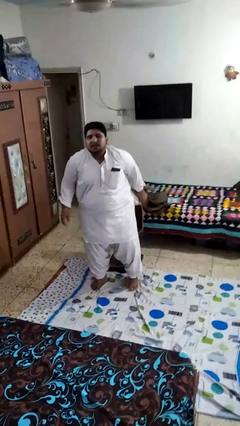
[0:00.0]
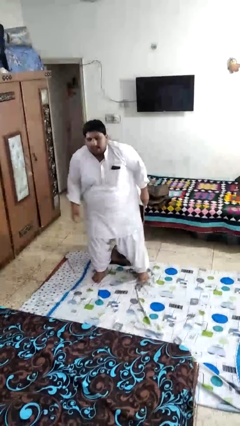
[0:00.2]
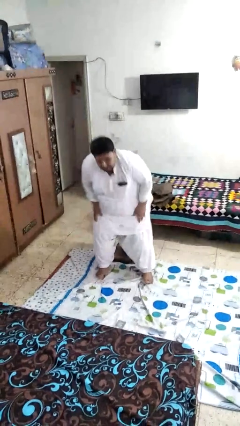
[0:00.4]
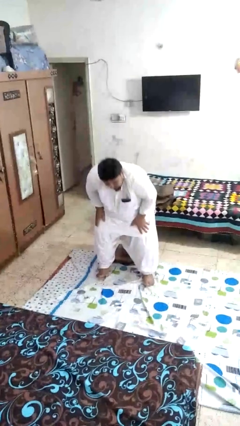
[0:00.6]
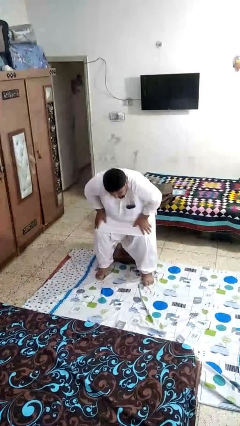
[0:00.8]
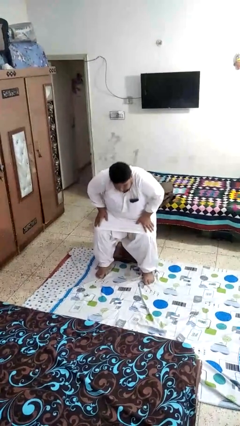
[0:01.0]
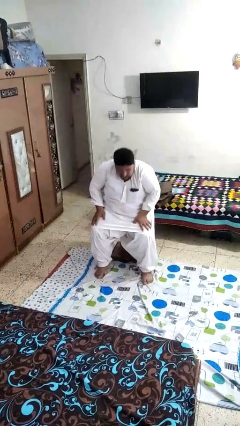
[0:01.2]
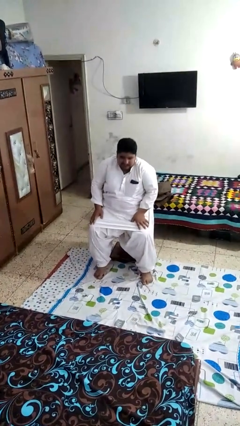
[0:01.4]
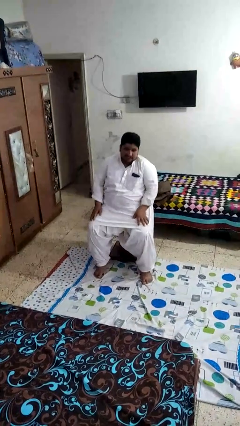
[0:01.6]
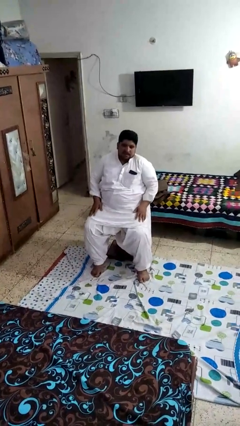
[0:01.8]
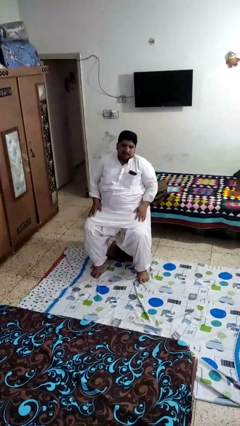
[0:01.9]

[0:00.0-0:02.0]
person sits down

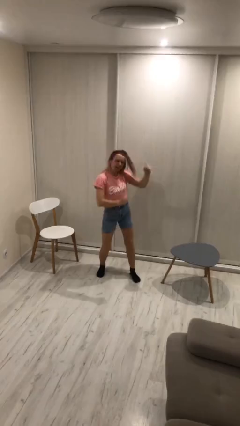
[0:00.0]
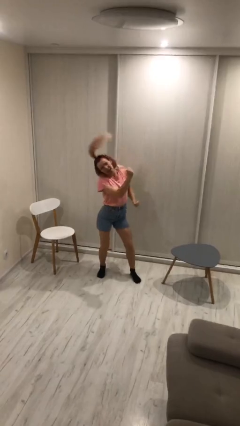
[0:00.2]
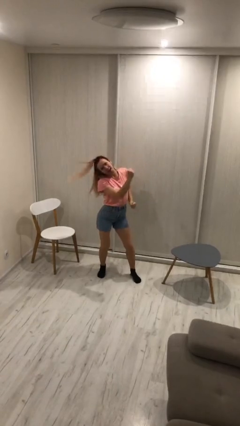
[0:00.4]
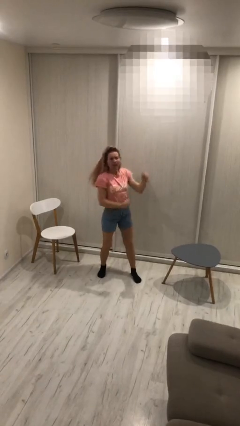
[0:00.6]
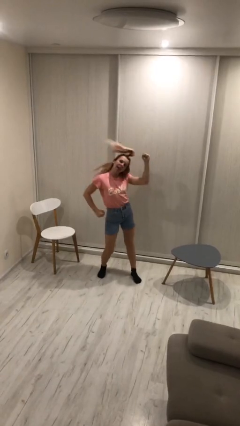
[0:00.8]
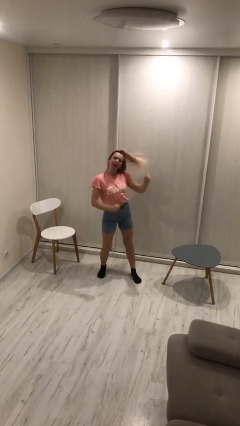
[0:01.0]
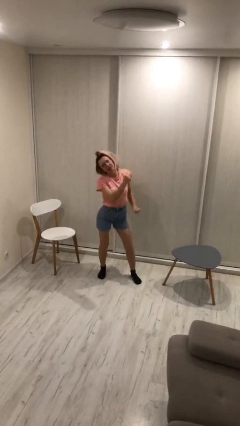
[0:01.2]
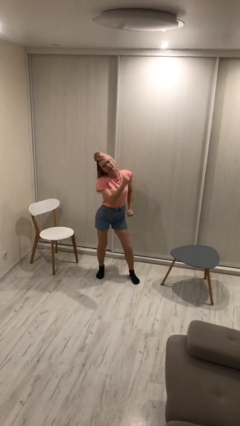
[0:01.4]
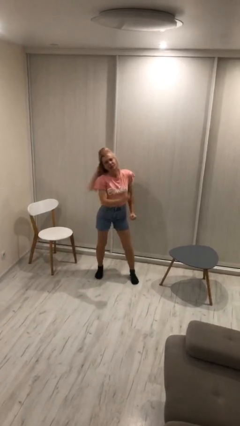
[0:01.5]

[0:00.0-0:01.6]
person dances in place

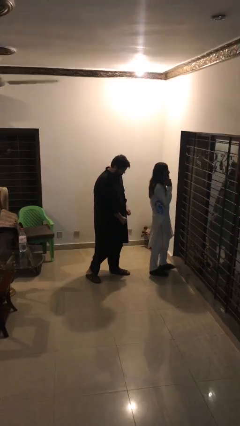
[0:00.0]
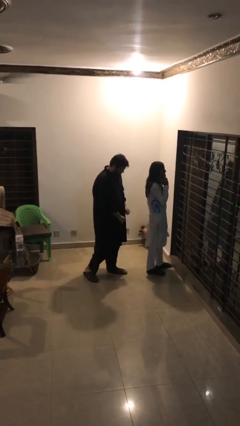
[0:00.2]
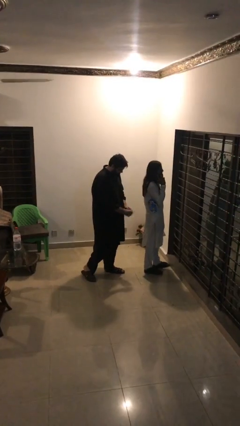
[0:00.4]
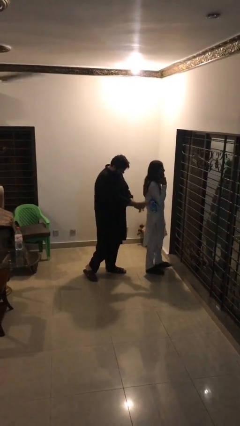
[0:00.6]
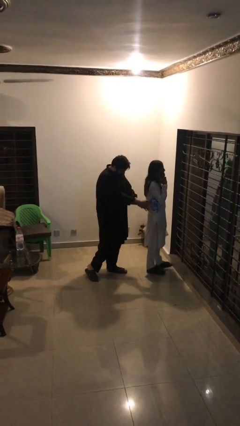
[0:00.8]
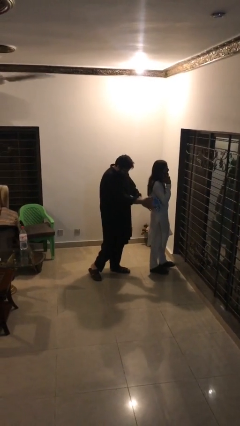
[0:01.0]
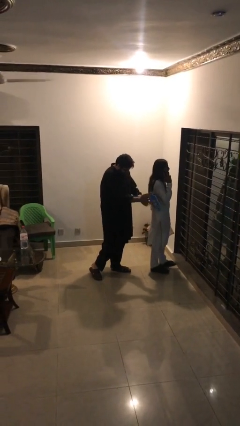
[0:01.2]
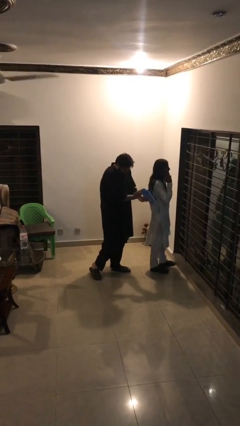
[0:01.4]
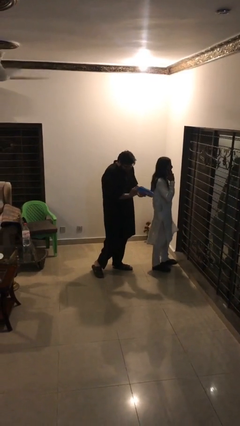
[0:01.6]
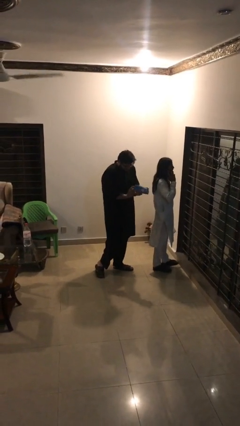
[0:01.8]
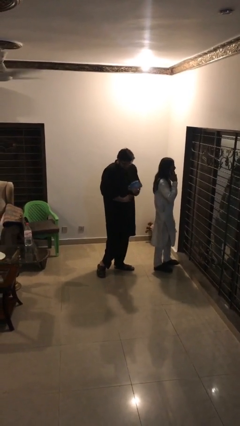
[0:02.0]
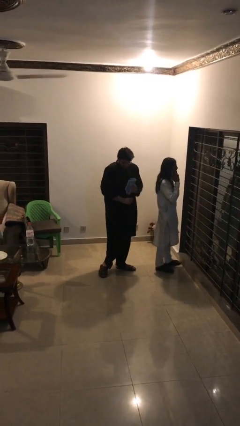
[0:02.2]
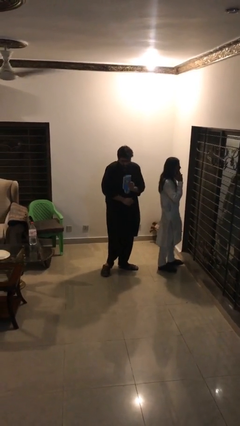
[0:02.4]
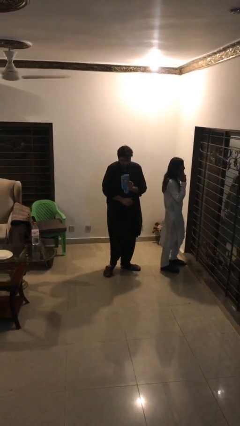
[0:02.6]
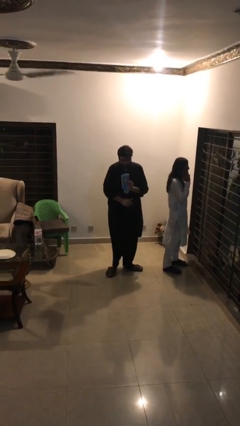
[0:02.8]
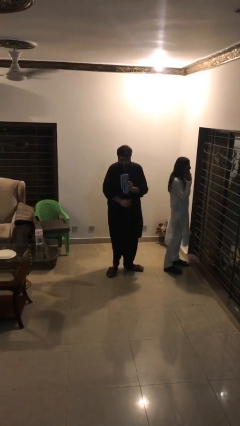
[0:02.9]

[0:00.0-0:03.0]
person steals object from person

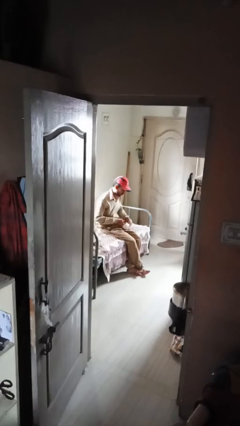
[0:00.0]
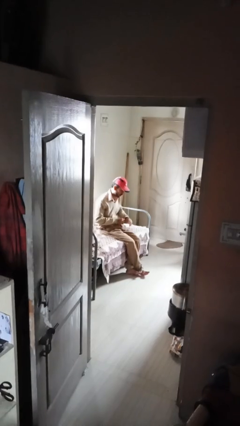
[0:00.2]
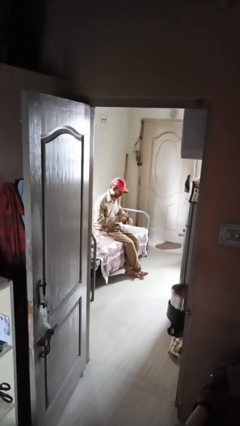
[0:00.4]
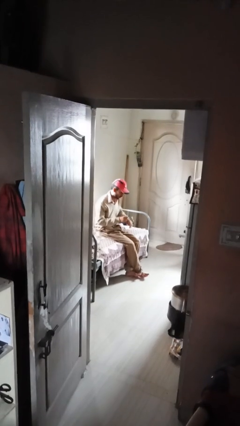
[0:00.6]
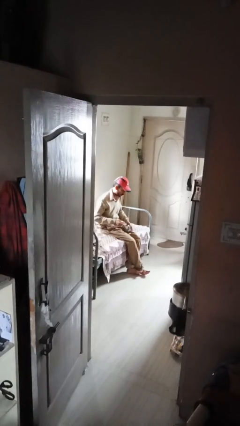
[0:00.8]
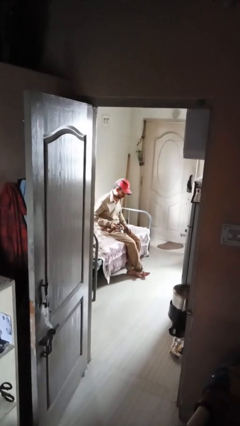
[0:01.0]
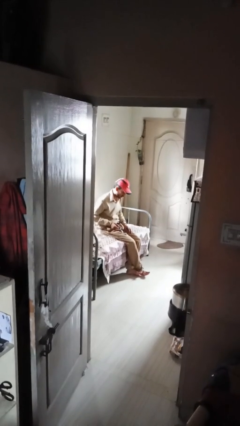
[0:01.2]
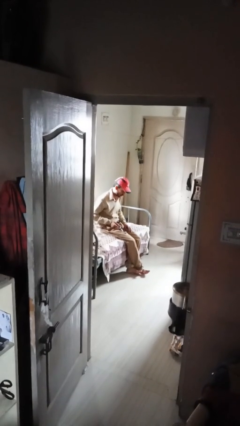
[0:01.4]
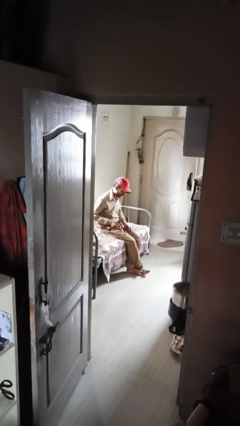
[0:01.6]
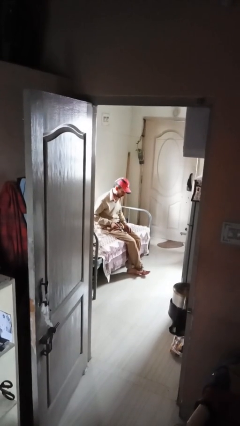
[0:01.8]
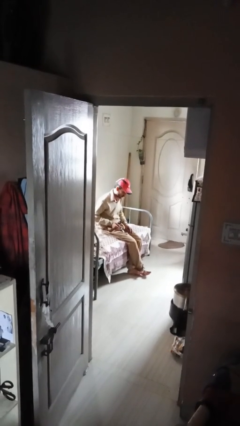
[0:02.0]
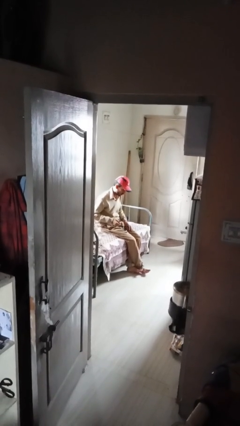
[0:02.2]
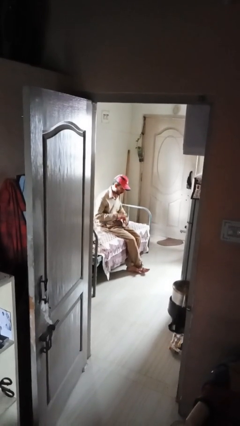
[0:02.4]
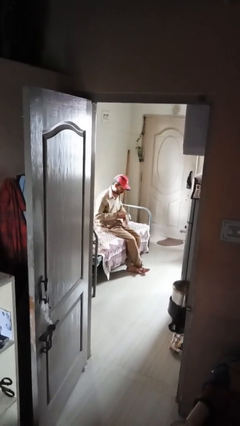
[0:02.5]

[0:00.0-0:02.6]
person takes off wristwatch

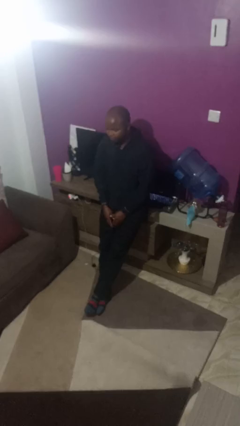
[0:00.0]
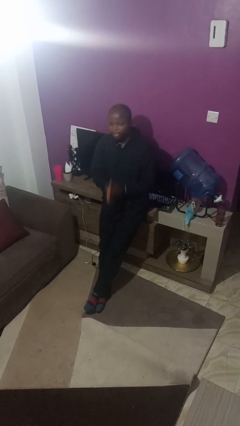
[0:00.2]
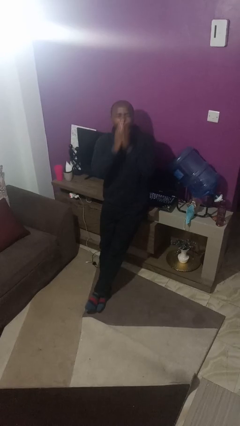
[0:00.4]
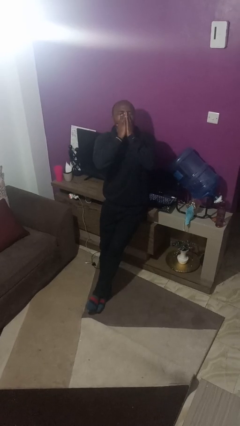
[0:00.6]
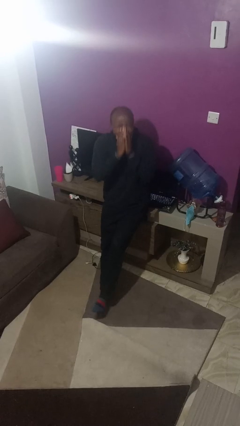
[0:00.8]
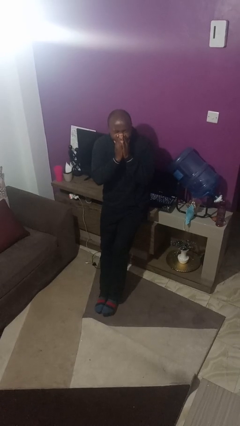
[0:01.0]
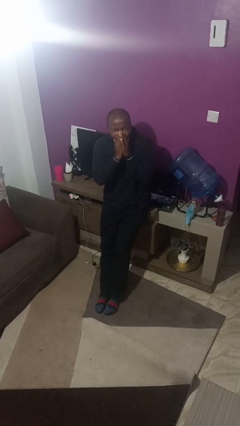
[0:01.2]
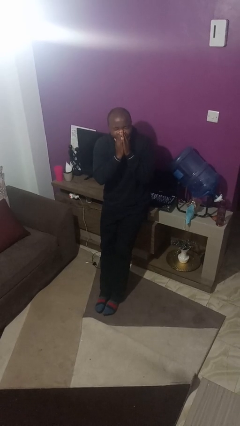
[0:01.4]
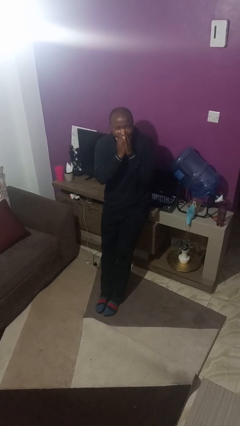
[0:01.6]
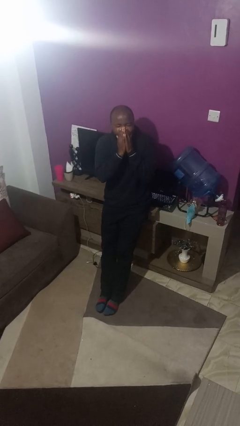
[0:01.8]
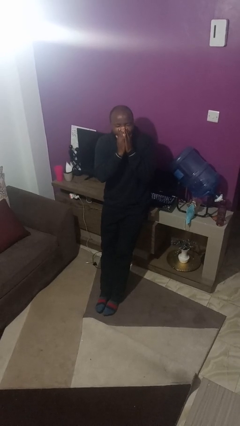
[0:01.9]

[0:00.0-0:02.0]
person sneezes into hand

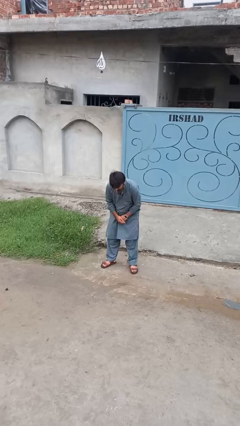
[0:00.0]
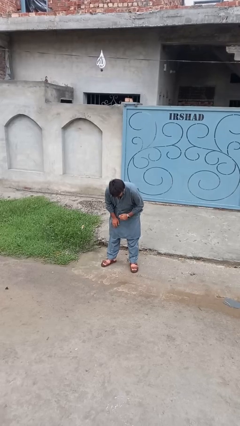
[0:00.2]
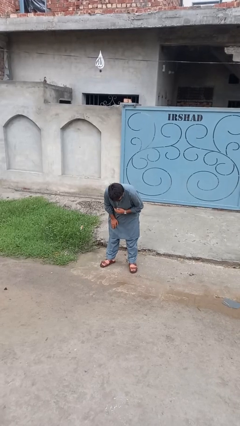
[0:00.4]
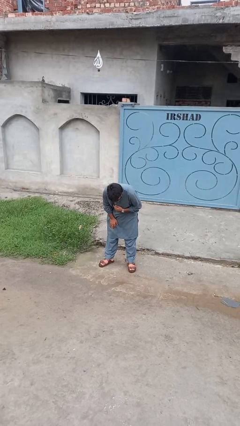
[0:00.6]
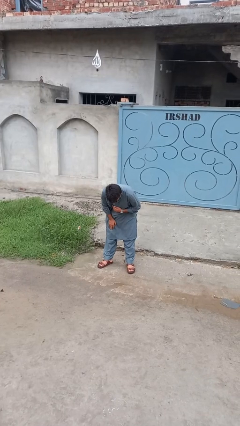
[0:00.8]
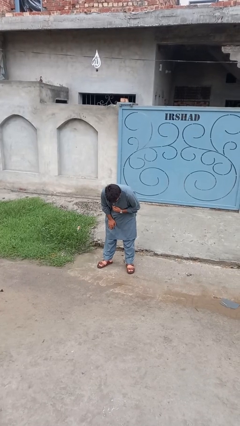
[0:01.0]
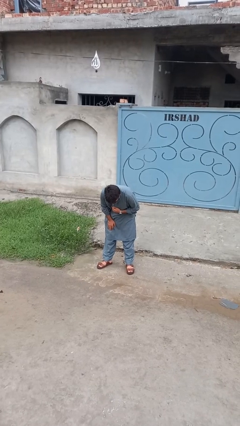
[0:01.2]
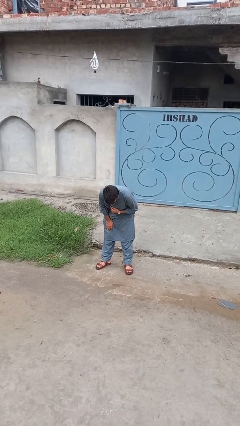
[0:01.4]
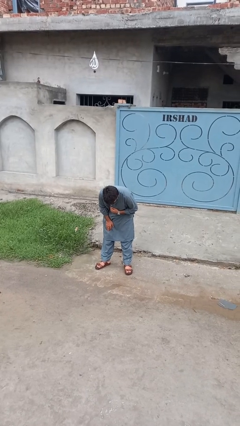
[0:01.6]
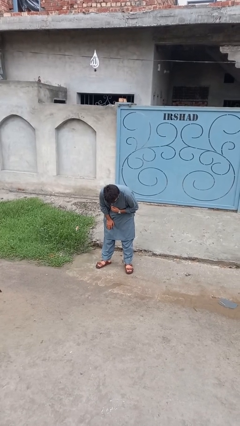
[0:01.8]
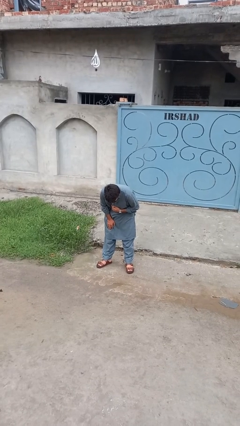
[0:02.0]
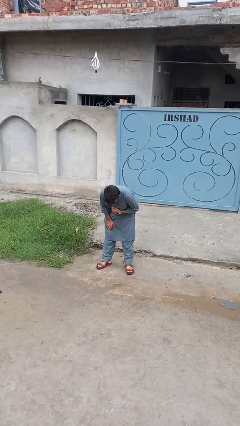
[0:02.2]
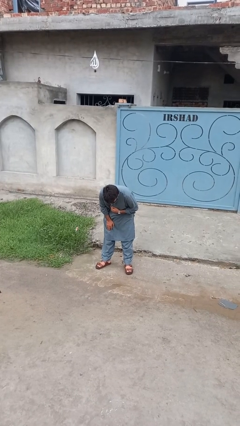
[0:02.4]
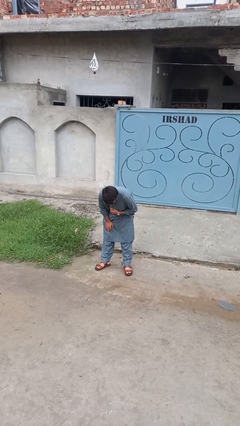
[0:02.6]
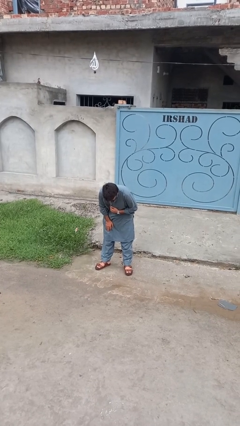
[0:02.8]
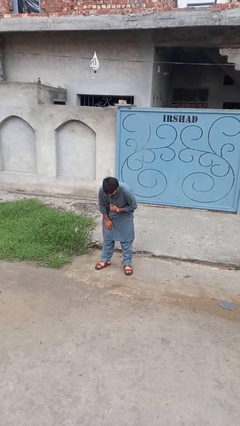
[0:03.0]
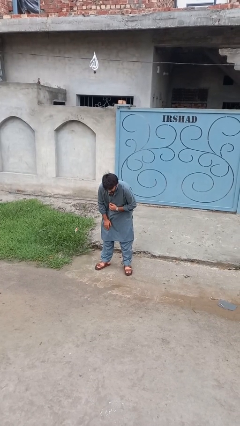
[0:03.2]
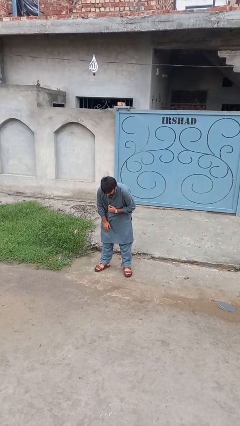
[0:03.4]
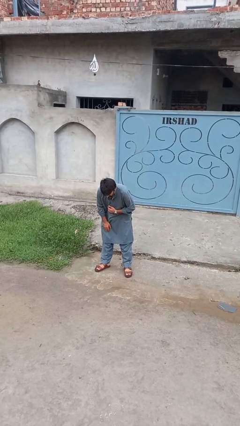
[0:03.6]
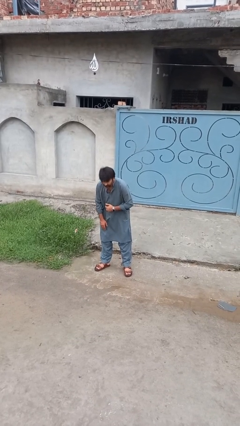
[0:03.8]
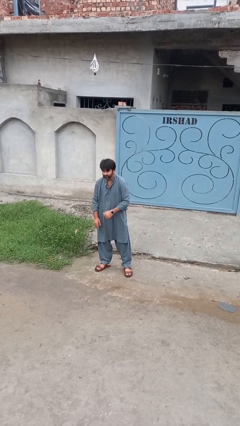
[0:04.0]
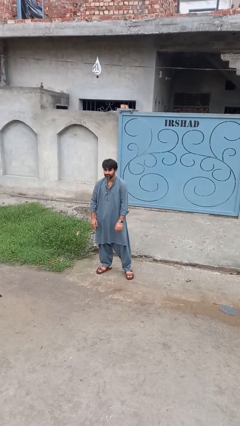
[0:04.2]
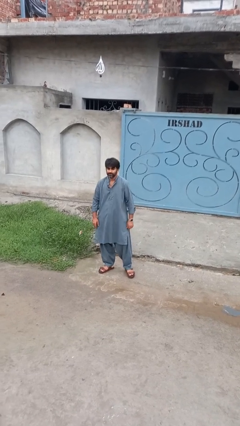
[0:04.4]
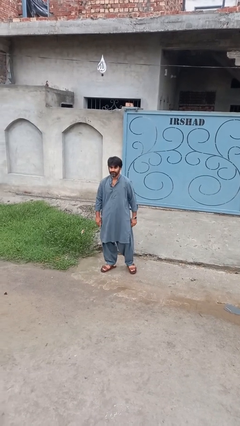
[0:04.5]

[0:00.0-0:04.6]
person bows

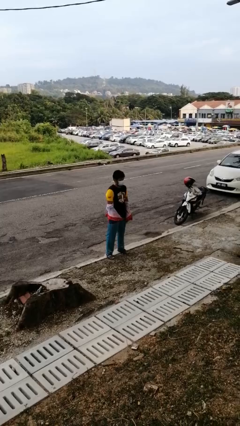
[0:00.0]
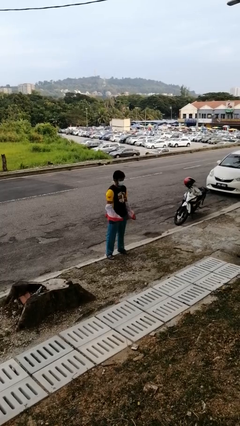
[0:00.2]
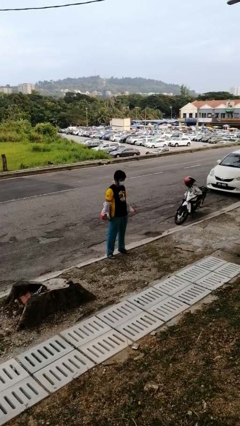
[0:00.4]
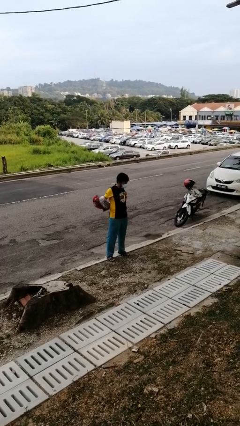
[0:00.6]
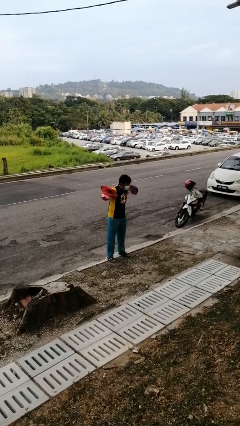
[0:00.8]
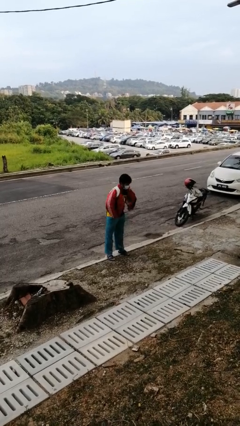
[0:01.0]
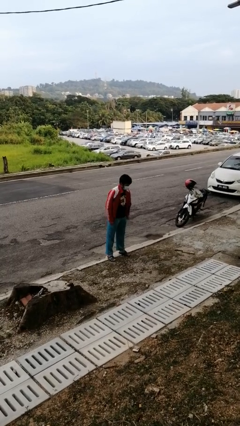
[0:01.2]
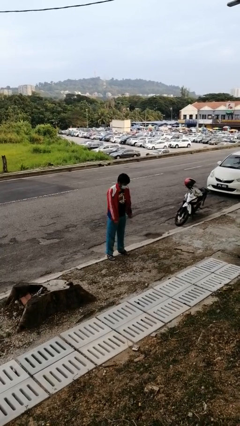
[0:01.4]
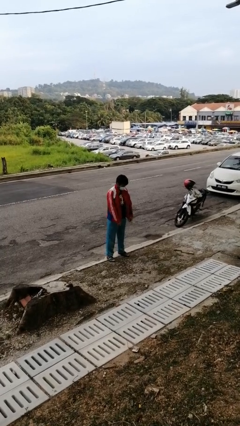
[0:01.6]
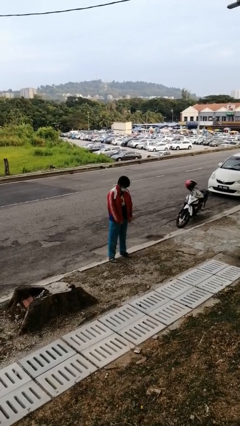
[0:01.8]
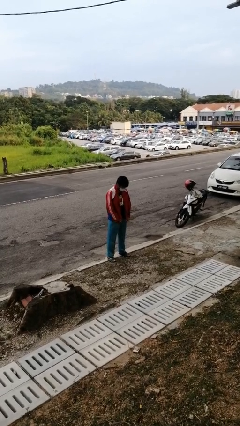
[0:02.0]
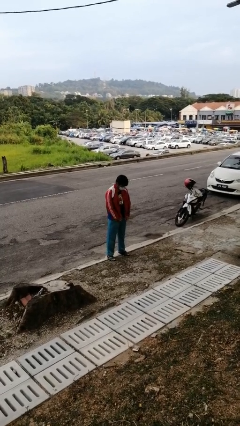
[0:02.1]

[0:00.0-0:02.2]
person puts on jacket
